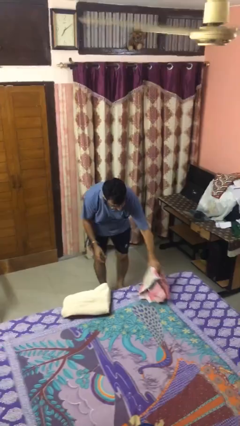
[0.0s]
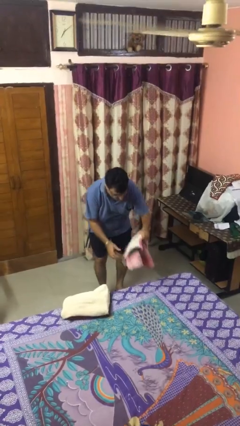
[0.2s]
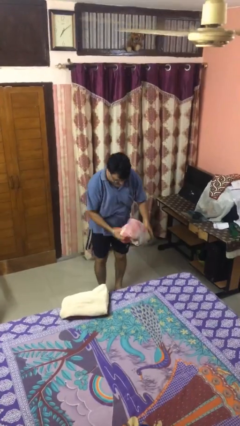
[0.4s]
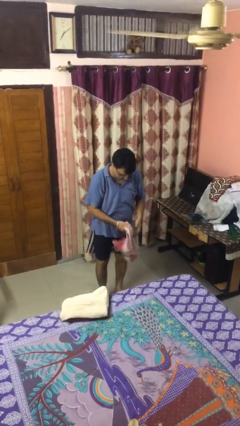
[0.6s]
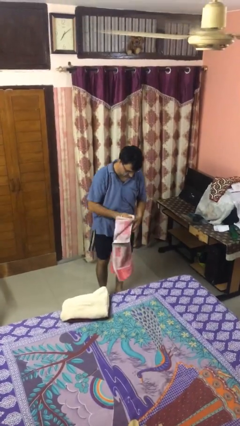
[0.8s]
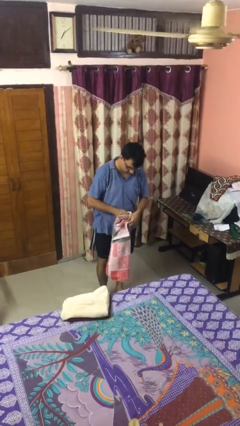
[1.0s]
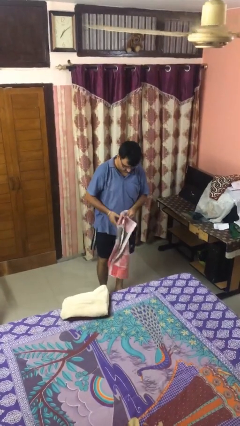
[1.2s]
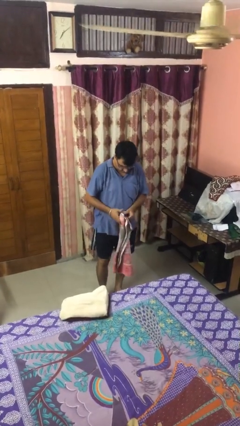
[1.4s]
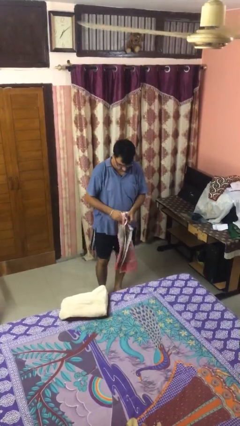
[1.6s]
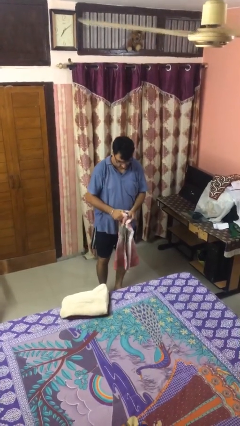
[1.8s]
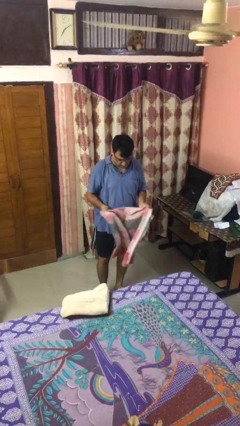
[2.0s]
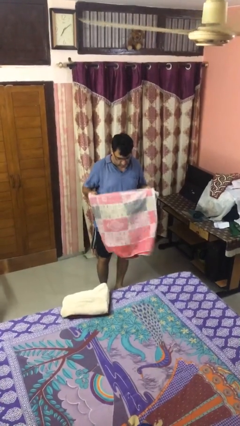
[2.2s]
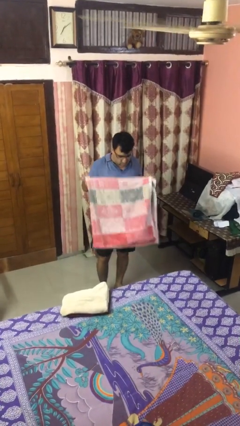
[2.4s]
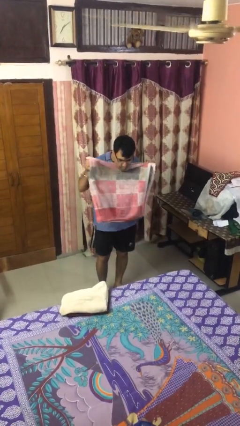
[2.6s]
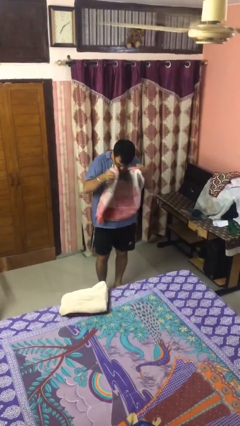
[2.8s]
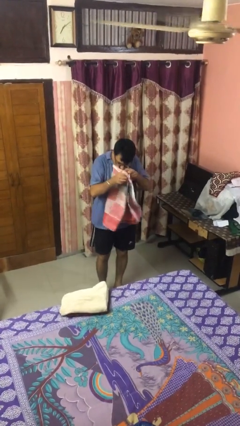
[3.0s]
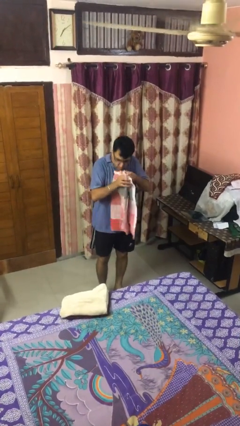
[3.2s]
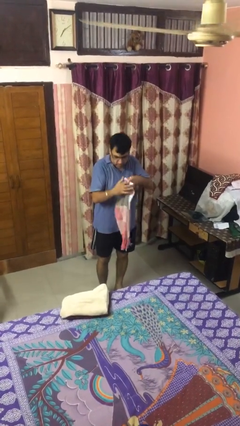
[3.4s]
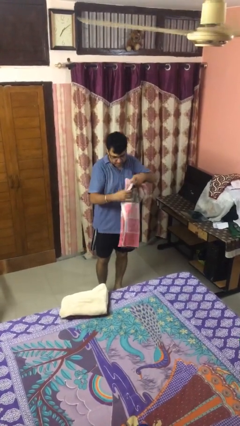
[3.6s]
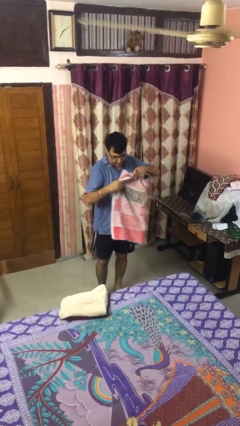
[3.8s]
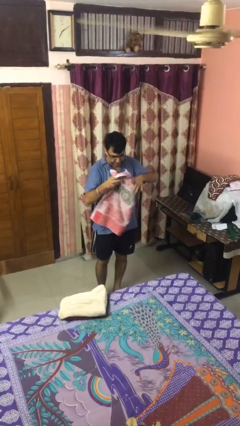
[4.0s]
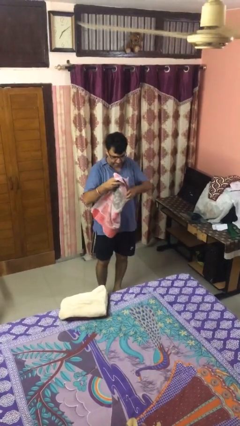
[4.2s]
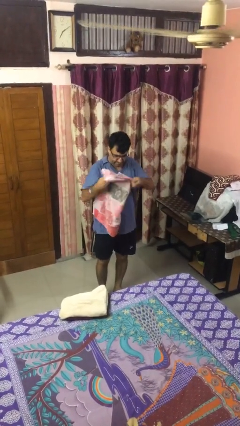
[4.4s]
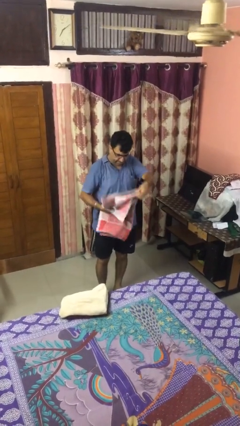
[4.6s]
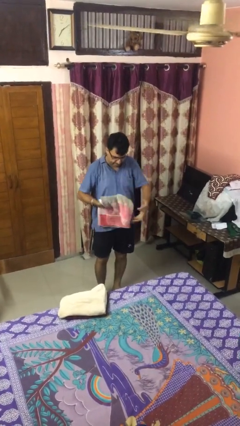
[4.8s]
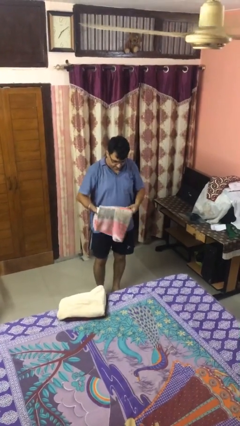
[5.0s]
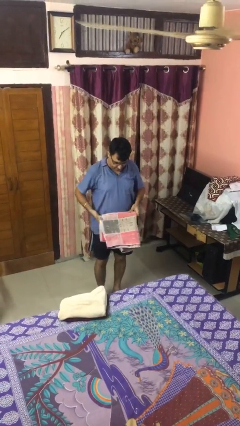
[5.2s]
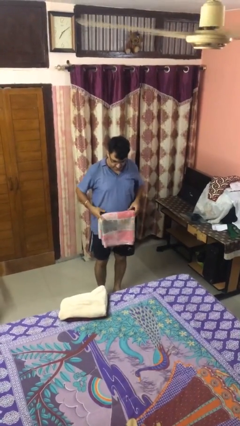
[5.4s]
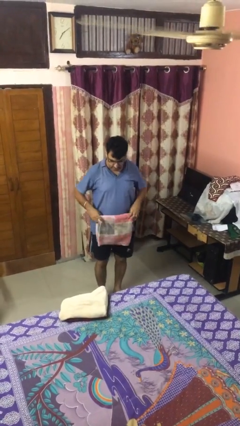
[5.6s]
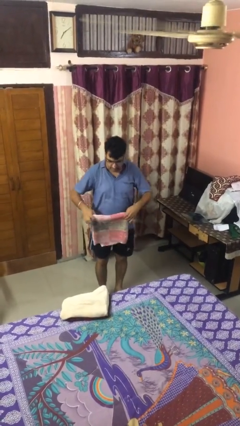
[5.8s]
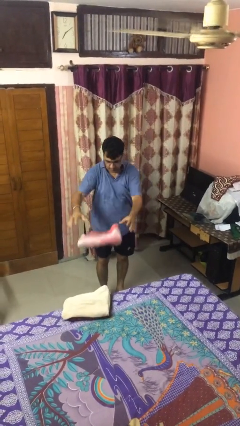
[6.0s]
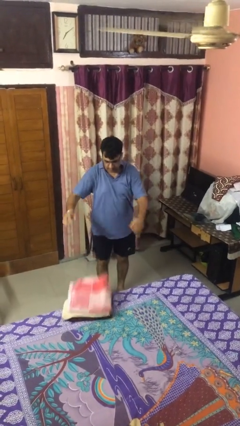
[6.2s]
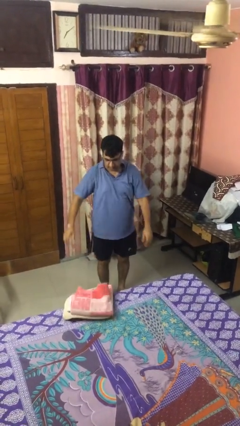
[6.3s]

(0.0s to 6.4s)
person folds towel

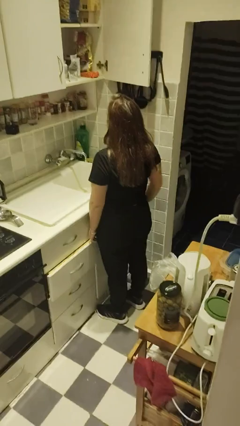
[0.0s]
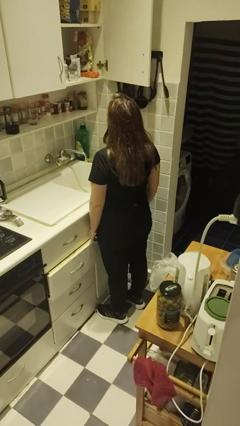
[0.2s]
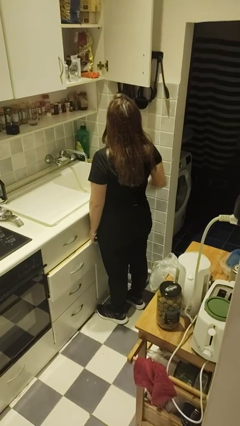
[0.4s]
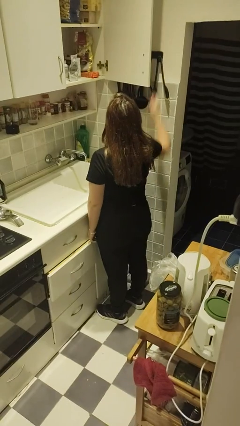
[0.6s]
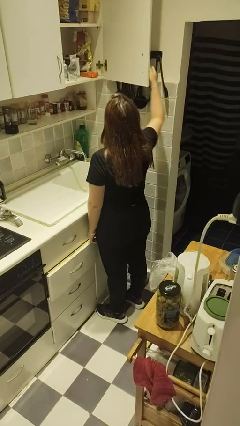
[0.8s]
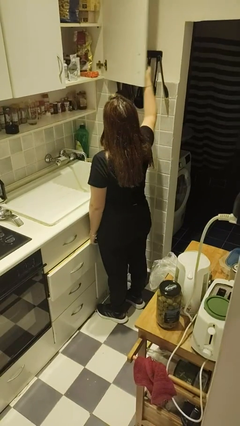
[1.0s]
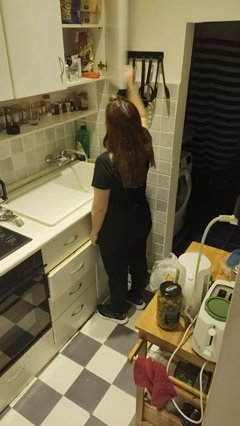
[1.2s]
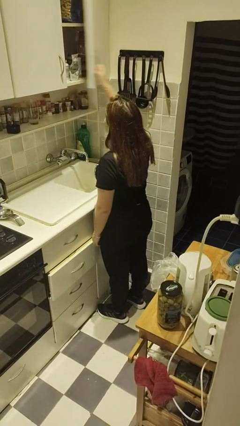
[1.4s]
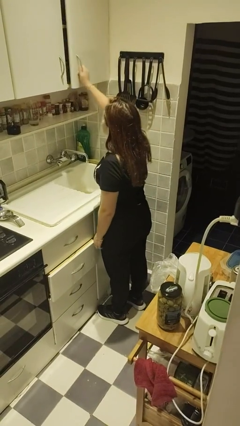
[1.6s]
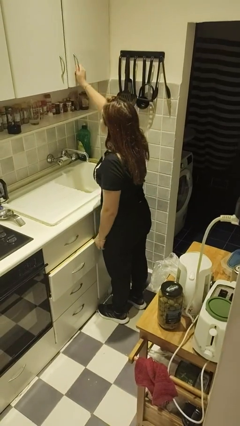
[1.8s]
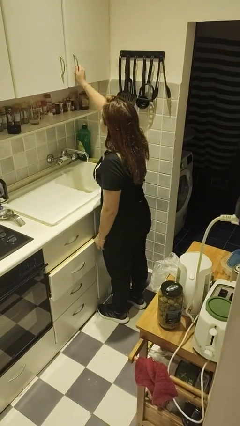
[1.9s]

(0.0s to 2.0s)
person closes cabinet

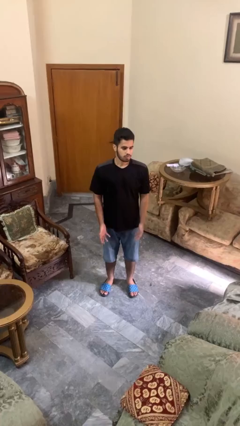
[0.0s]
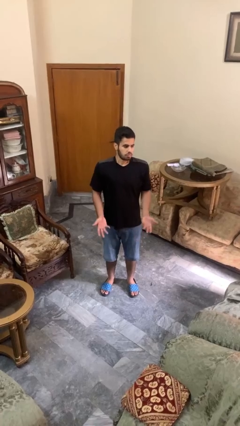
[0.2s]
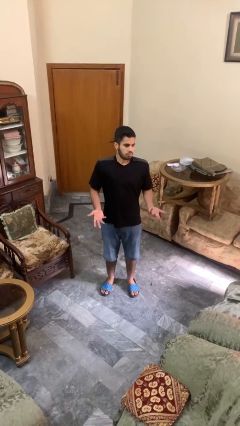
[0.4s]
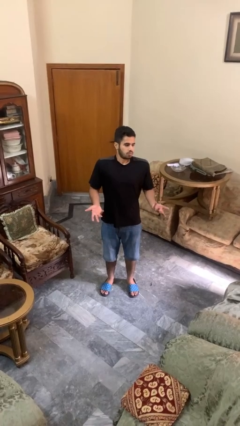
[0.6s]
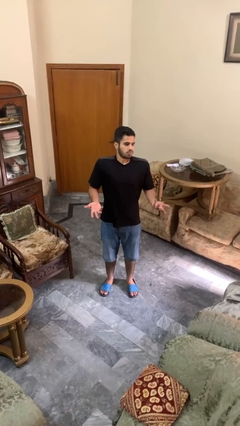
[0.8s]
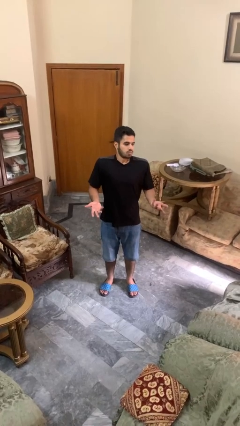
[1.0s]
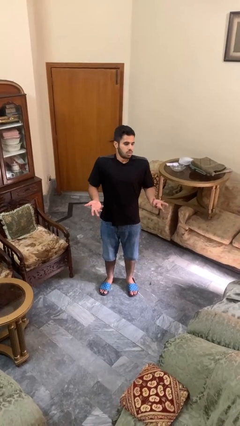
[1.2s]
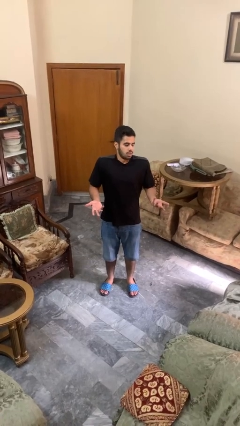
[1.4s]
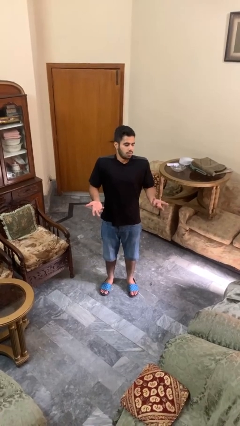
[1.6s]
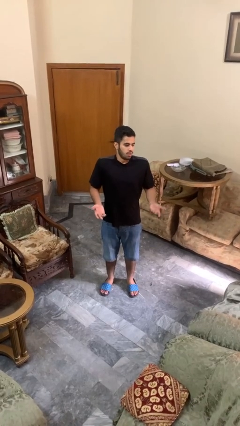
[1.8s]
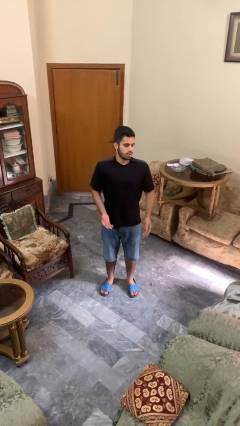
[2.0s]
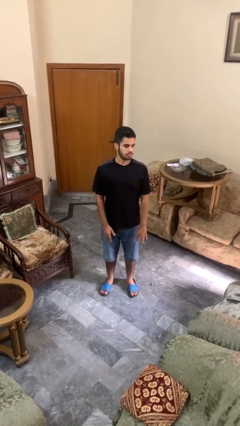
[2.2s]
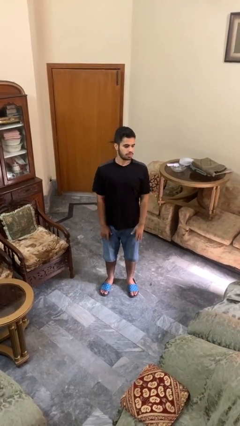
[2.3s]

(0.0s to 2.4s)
person shrugs

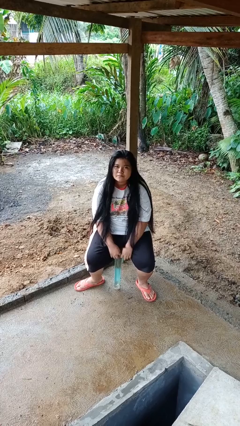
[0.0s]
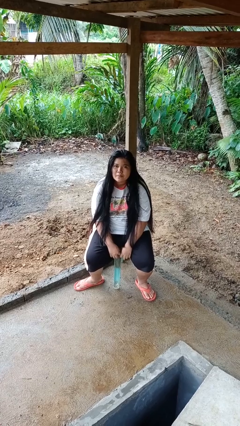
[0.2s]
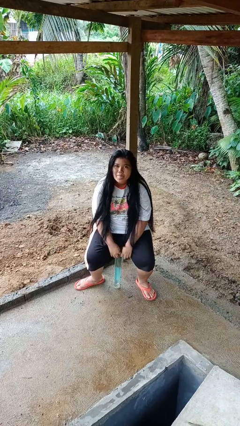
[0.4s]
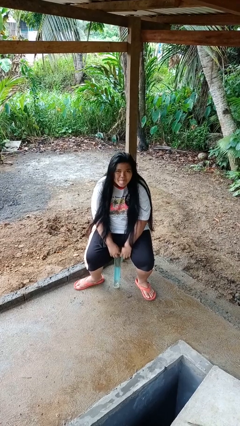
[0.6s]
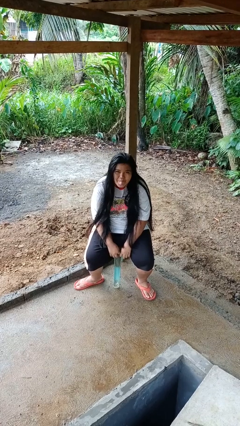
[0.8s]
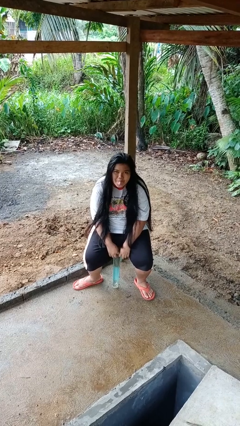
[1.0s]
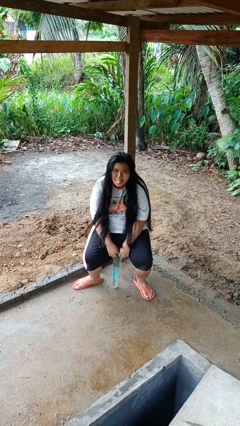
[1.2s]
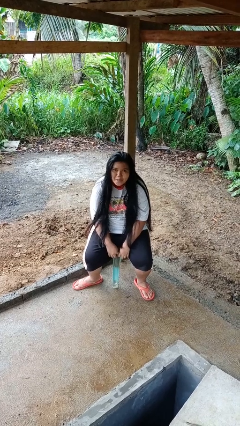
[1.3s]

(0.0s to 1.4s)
person sticks out tongue

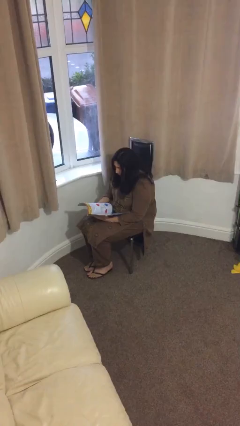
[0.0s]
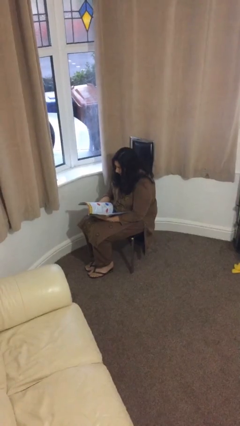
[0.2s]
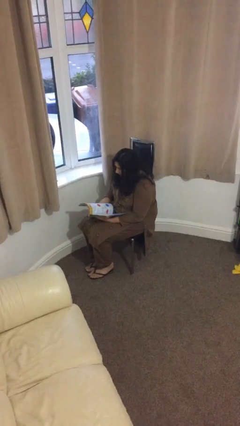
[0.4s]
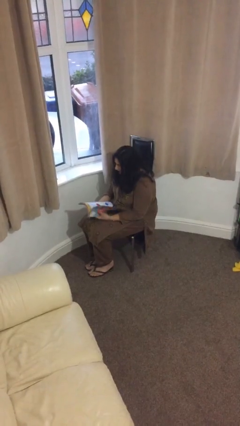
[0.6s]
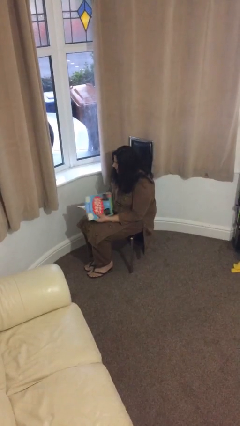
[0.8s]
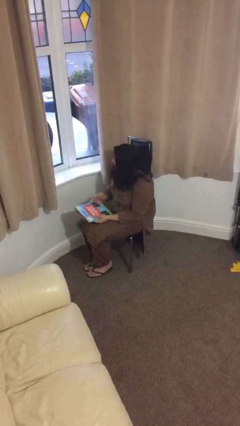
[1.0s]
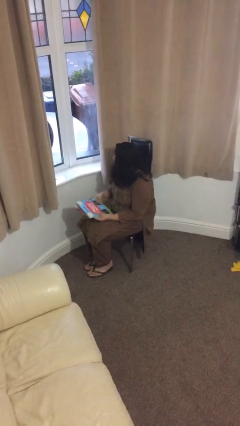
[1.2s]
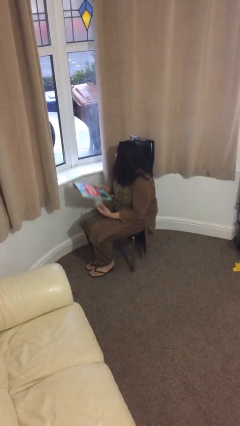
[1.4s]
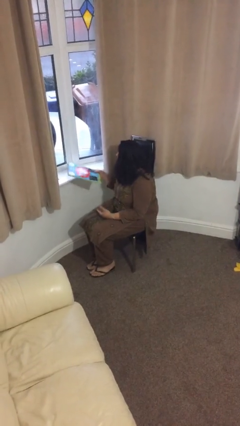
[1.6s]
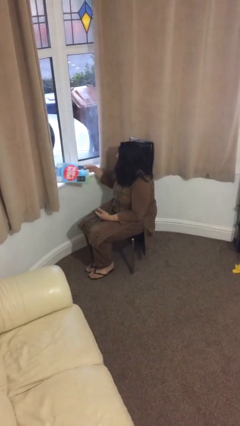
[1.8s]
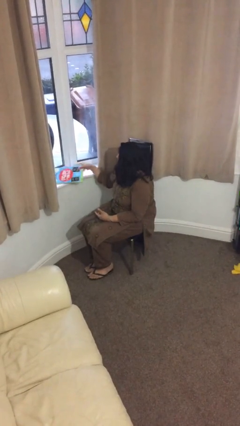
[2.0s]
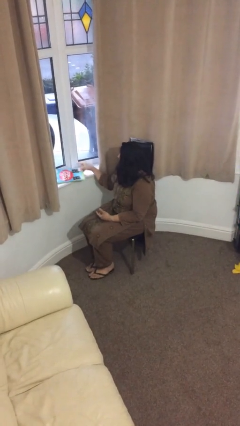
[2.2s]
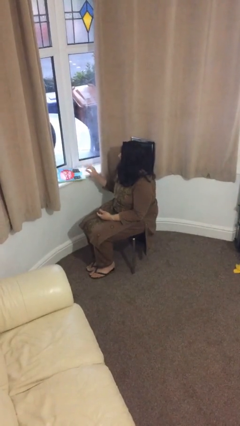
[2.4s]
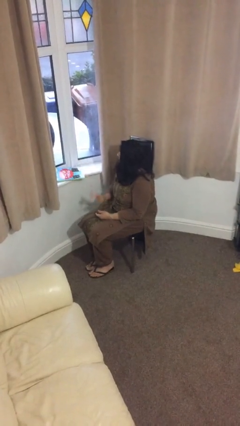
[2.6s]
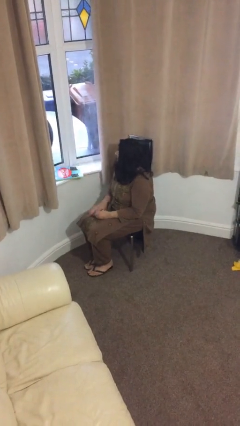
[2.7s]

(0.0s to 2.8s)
person puts down object on table

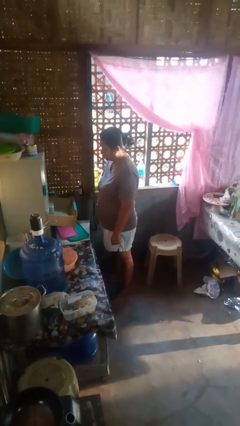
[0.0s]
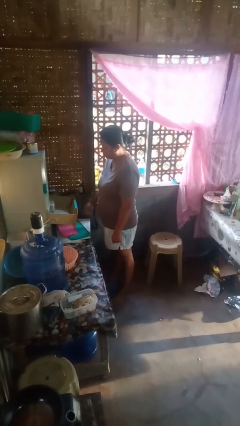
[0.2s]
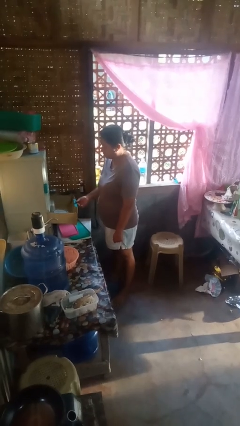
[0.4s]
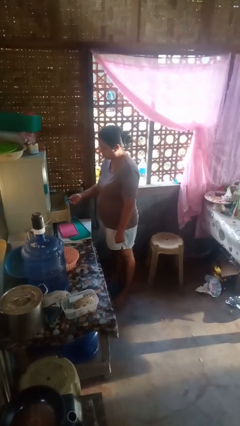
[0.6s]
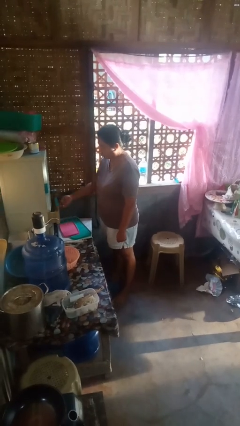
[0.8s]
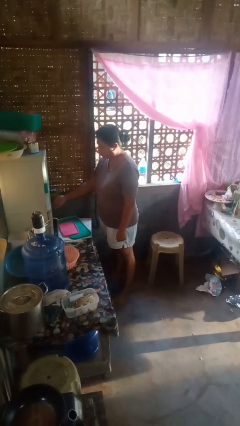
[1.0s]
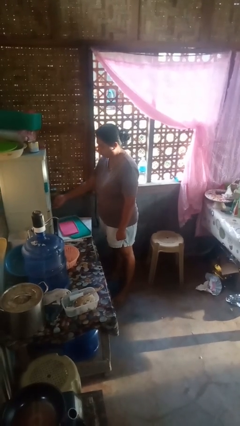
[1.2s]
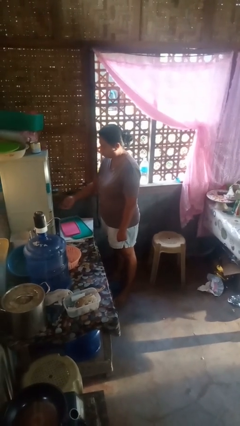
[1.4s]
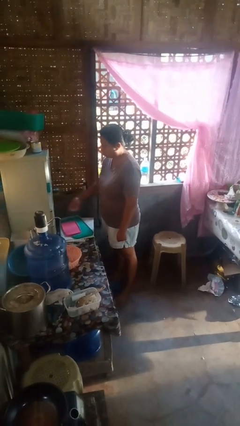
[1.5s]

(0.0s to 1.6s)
person closes kitchen drawer

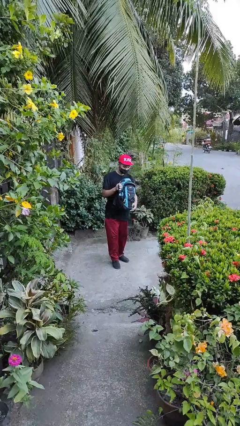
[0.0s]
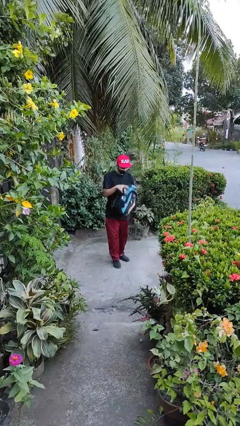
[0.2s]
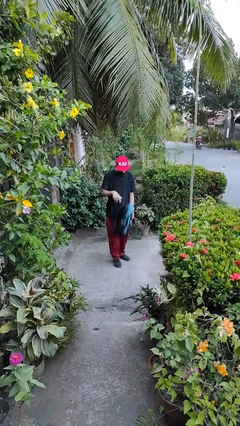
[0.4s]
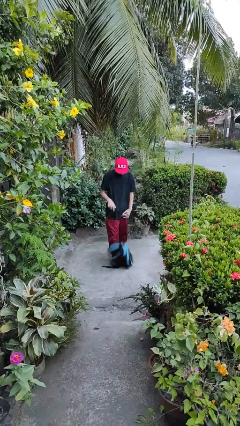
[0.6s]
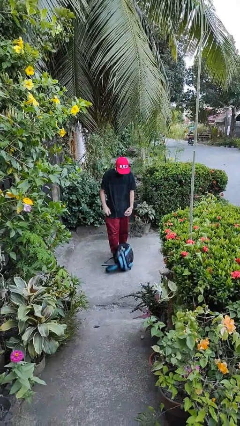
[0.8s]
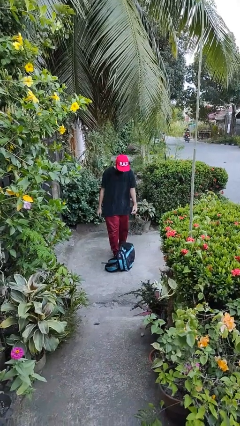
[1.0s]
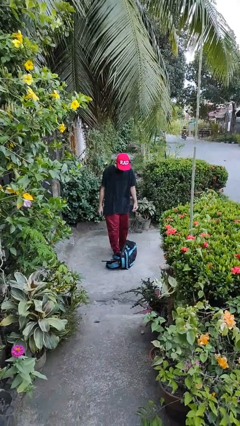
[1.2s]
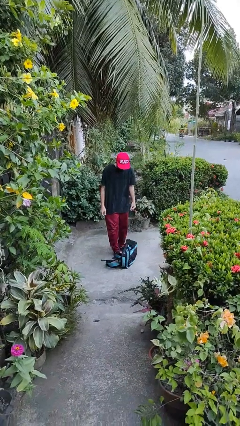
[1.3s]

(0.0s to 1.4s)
person drops object
